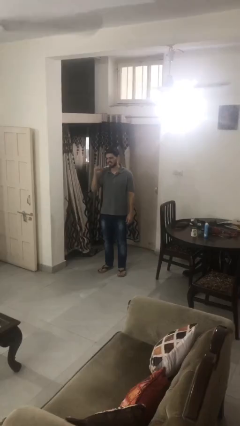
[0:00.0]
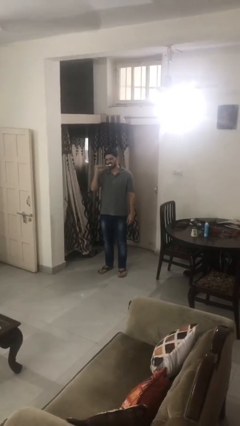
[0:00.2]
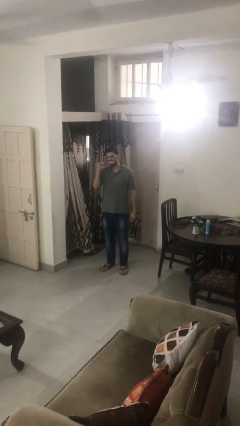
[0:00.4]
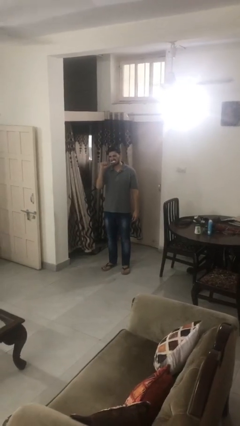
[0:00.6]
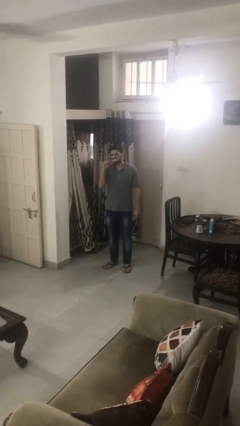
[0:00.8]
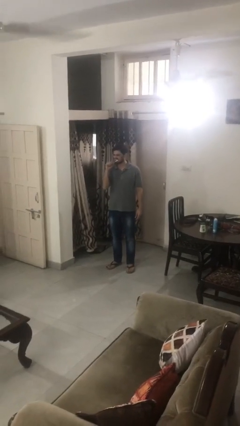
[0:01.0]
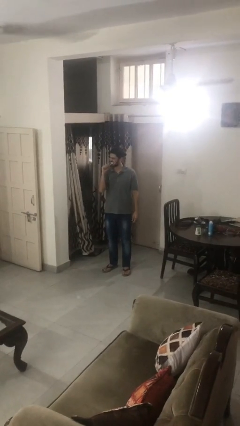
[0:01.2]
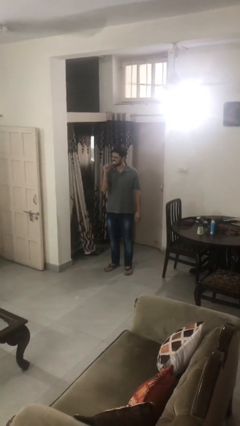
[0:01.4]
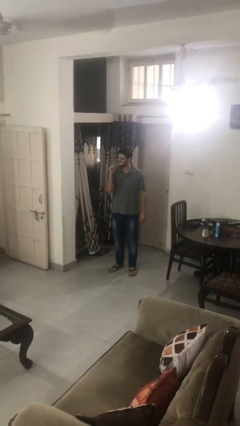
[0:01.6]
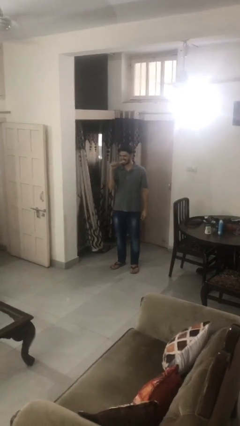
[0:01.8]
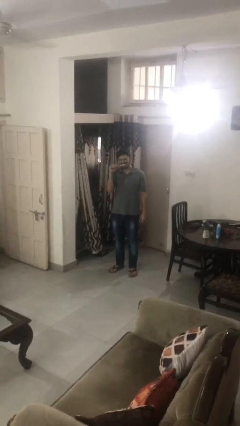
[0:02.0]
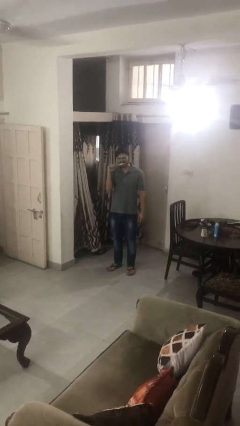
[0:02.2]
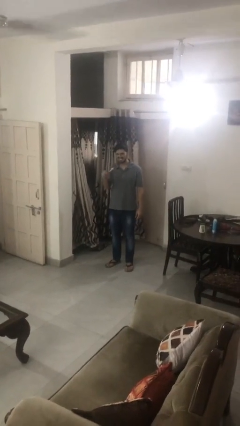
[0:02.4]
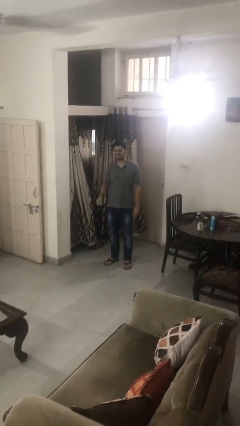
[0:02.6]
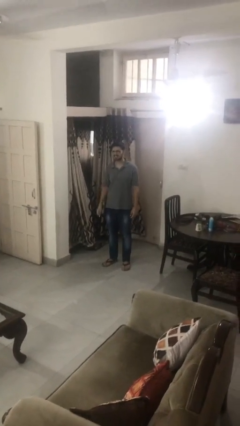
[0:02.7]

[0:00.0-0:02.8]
person brushes teeth

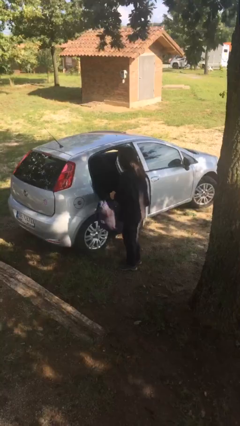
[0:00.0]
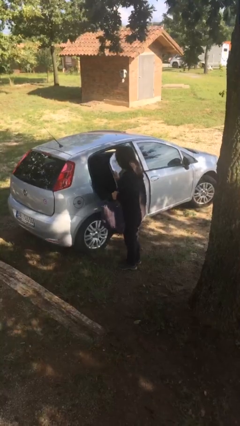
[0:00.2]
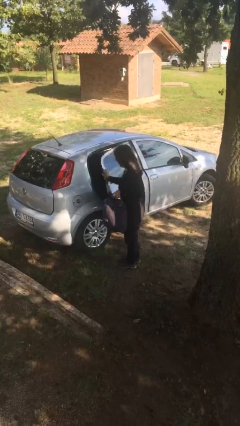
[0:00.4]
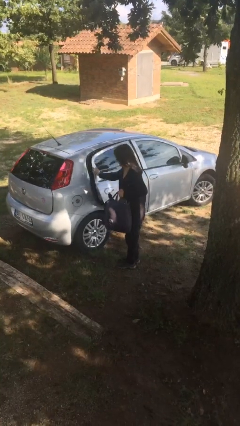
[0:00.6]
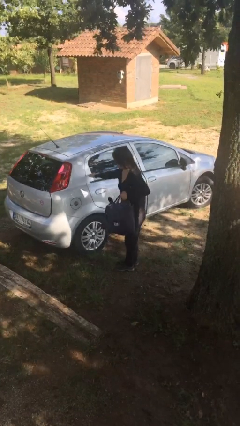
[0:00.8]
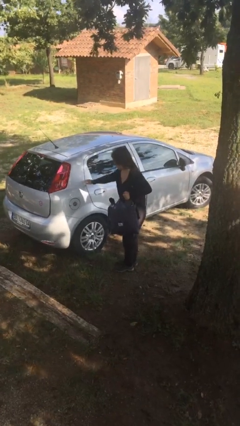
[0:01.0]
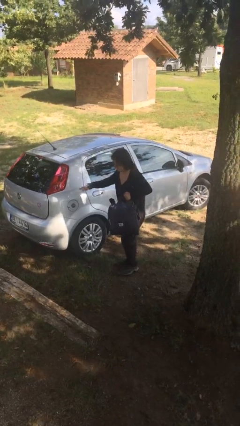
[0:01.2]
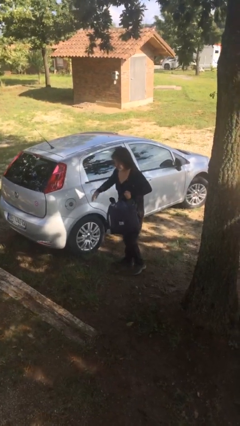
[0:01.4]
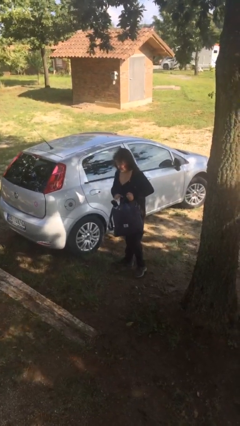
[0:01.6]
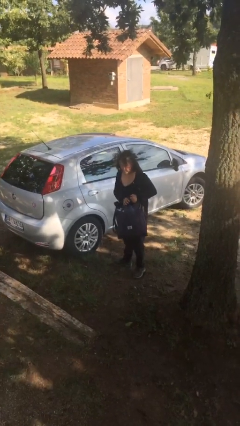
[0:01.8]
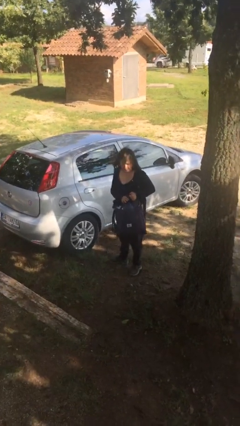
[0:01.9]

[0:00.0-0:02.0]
person closes car door

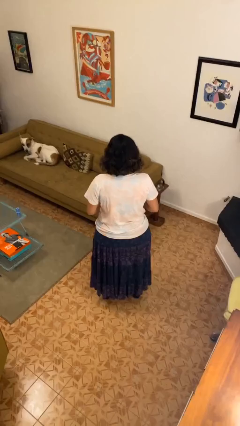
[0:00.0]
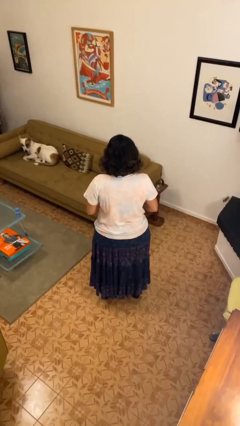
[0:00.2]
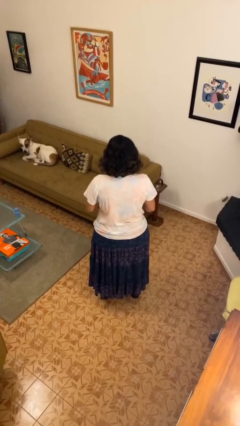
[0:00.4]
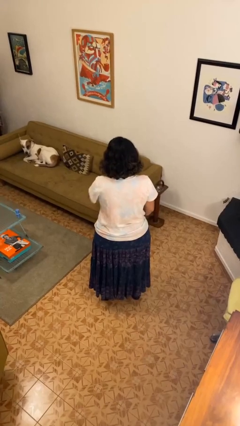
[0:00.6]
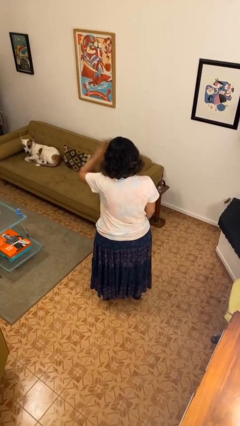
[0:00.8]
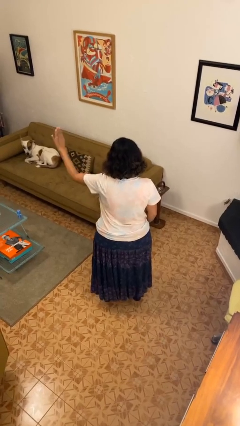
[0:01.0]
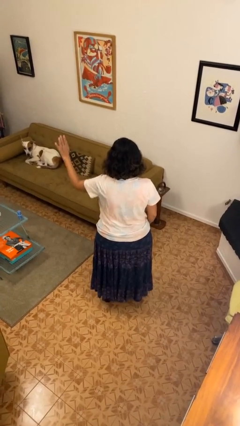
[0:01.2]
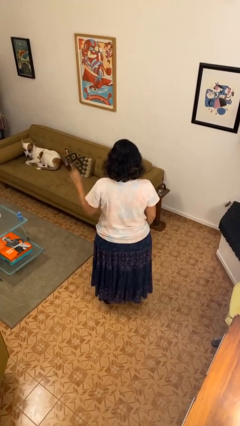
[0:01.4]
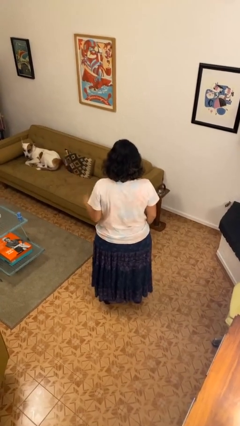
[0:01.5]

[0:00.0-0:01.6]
person gestures swipe left

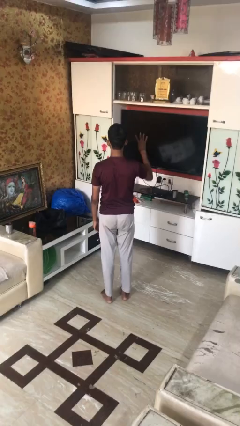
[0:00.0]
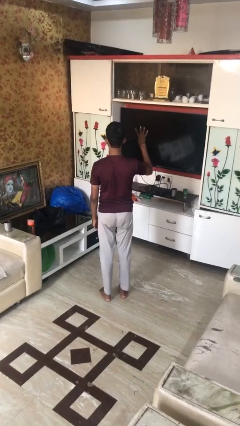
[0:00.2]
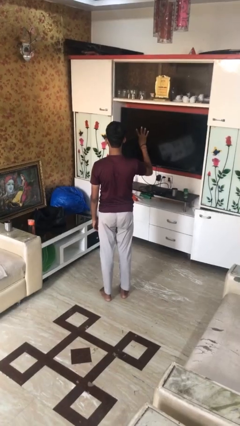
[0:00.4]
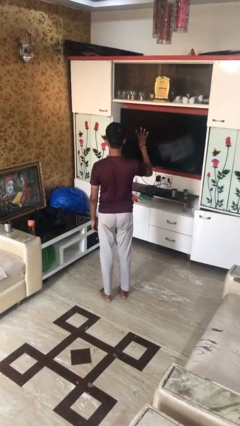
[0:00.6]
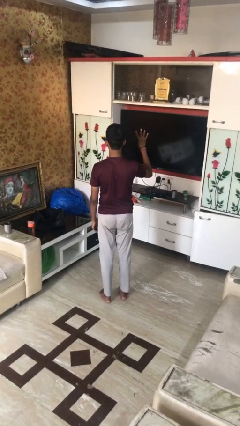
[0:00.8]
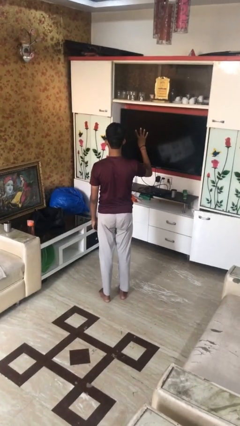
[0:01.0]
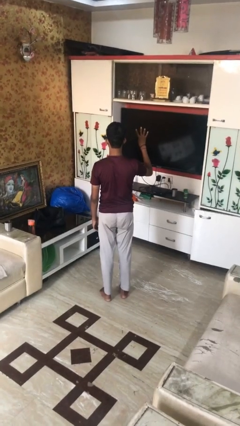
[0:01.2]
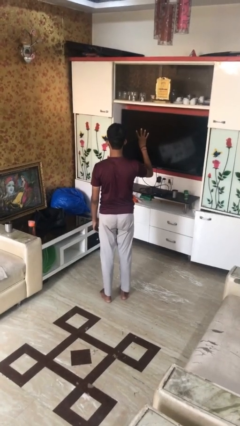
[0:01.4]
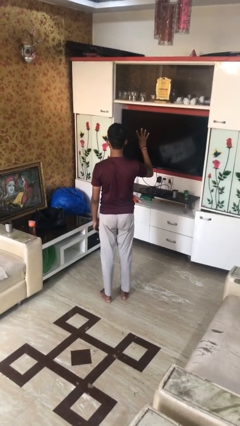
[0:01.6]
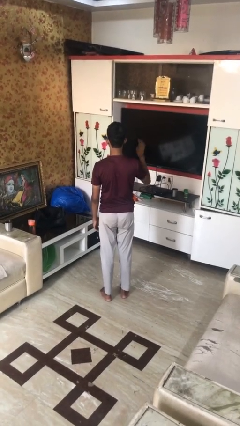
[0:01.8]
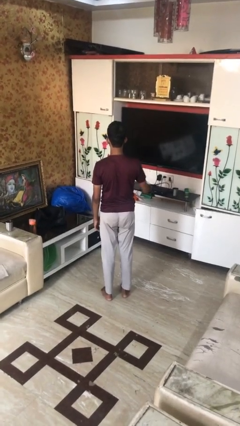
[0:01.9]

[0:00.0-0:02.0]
person gestures number four

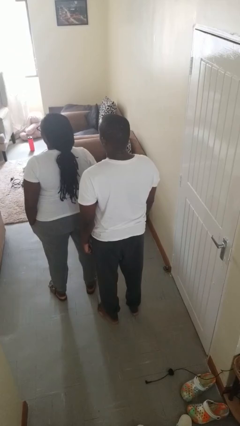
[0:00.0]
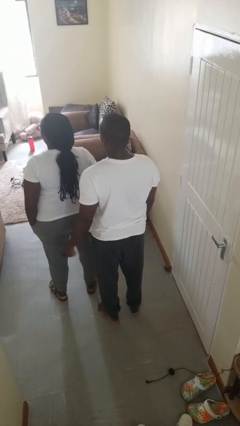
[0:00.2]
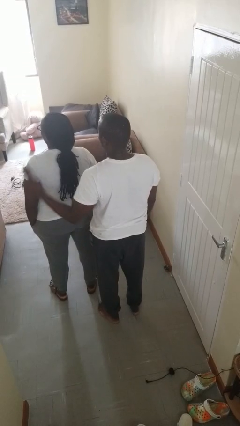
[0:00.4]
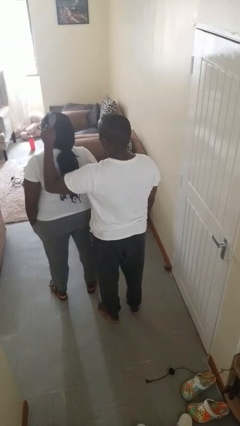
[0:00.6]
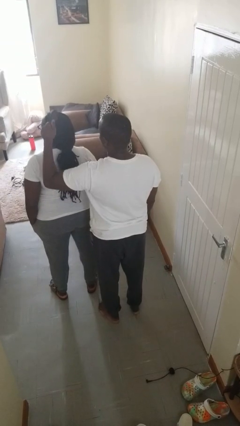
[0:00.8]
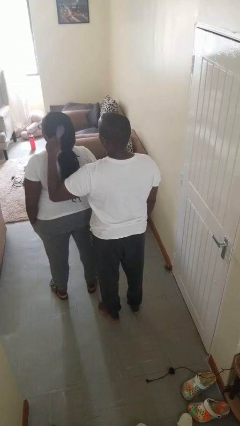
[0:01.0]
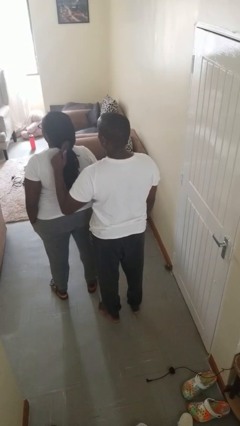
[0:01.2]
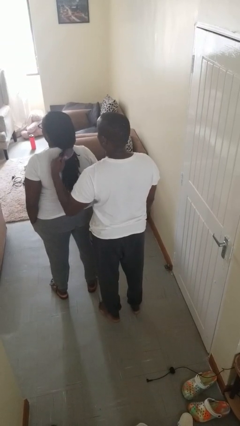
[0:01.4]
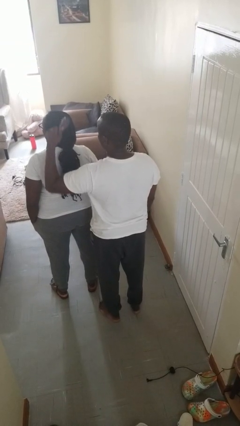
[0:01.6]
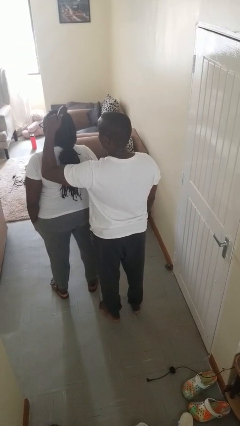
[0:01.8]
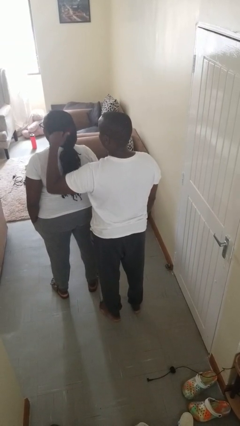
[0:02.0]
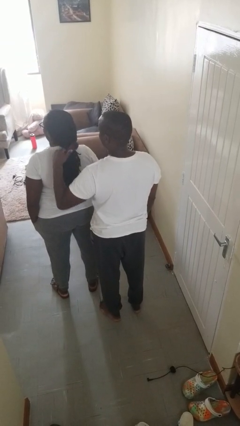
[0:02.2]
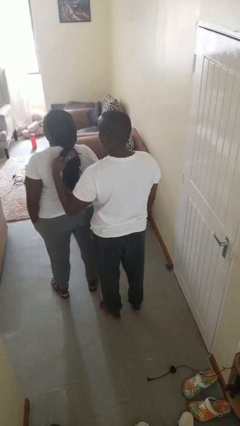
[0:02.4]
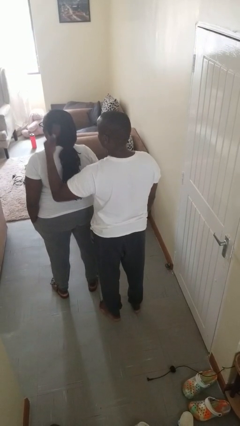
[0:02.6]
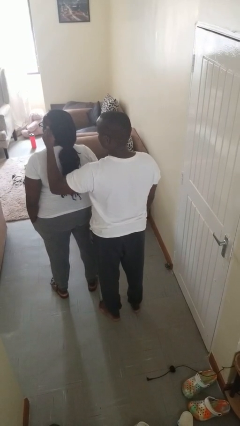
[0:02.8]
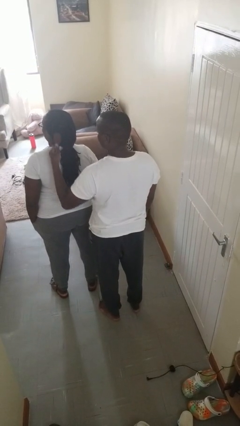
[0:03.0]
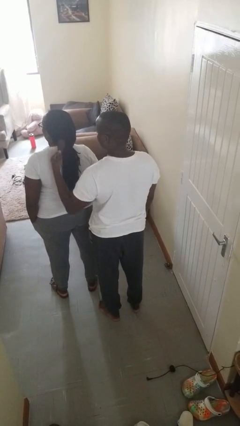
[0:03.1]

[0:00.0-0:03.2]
person brushes hair of person

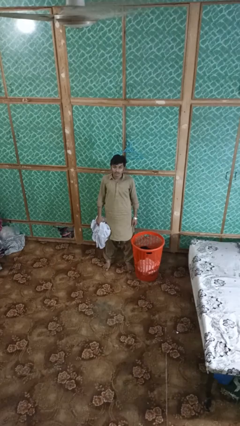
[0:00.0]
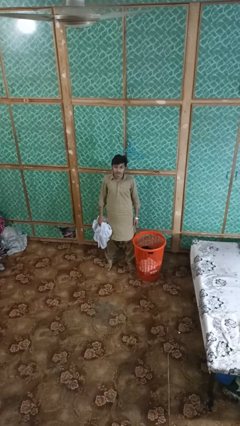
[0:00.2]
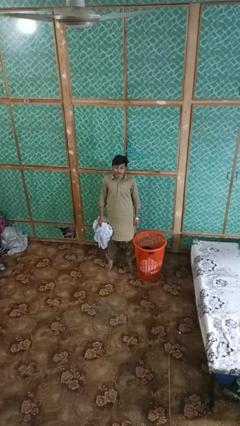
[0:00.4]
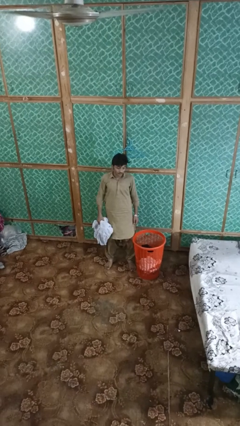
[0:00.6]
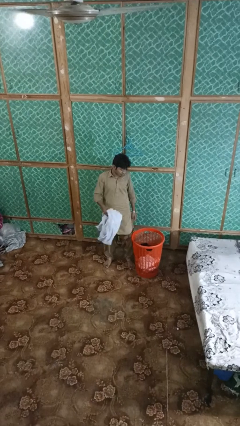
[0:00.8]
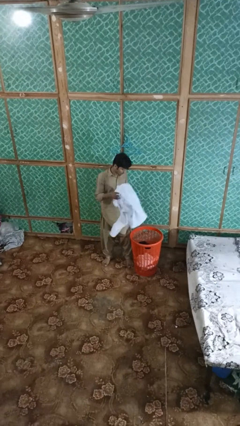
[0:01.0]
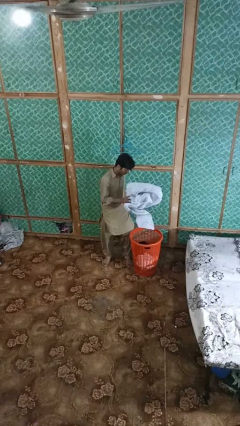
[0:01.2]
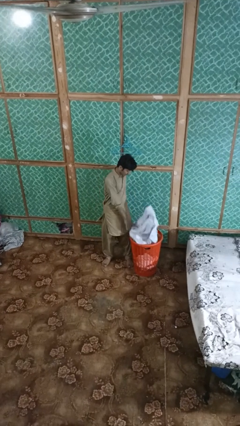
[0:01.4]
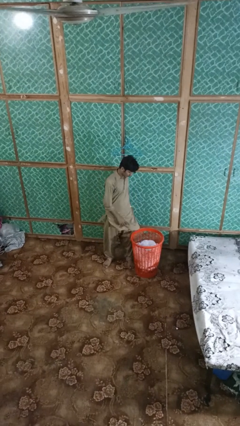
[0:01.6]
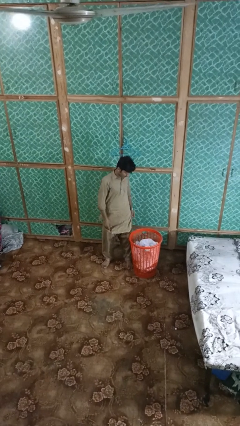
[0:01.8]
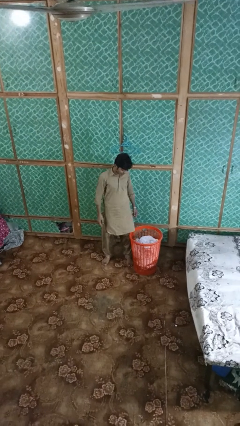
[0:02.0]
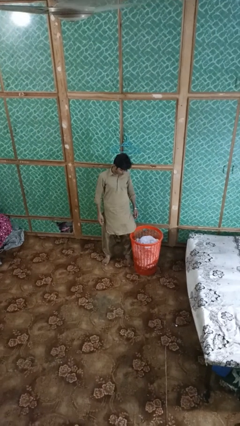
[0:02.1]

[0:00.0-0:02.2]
person puts object into basket

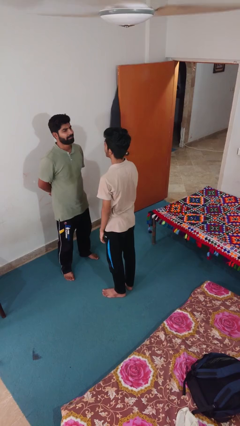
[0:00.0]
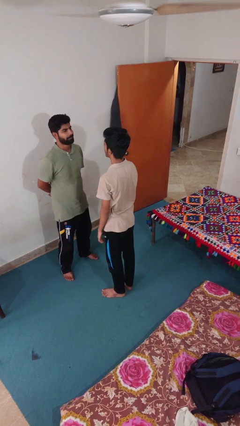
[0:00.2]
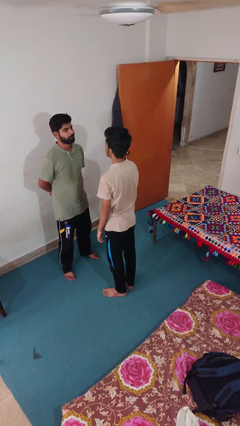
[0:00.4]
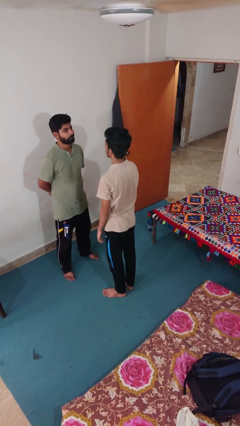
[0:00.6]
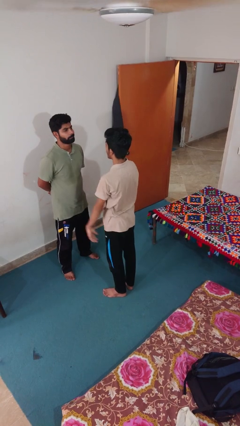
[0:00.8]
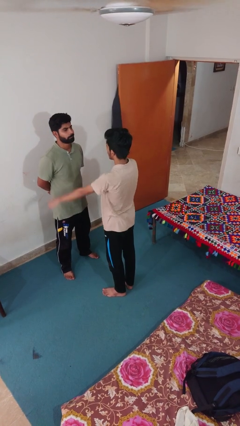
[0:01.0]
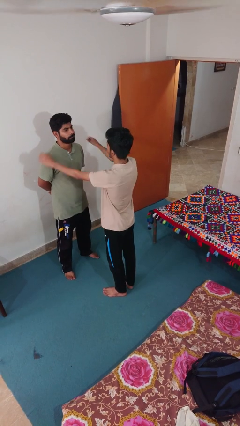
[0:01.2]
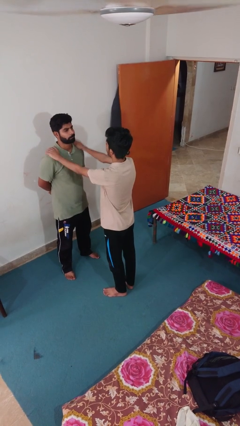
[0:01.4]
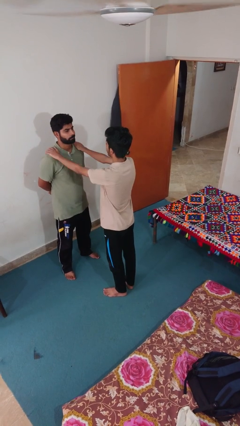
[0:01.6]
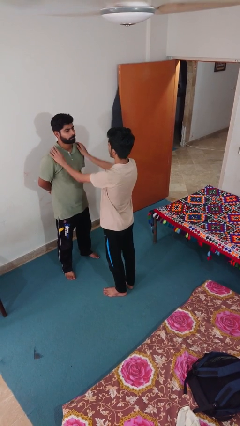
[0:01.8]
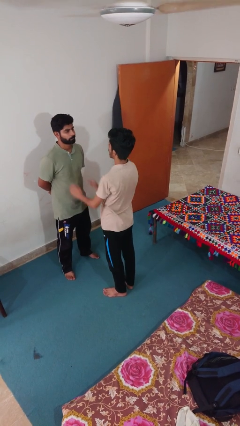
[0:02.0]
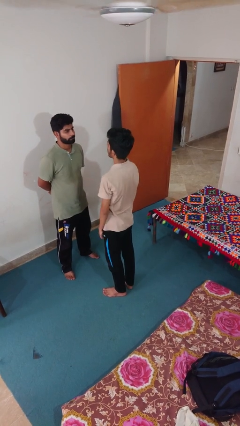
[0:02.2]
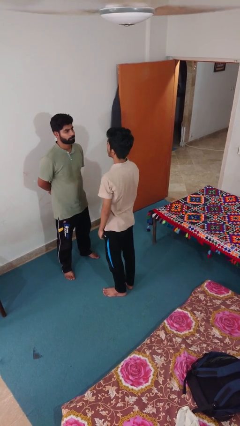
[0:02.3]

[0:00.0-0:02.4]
person pounds shoulders of person

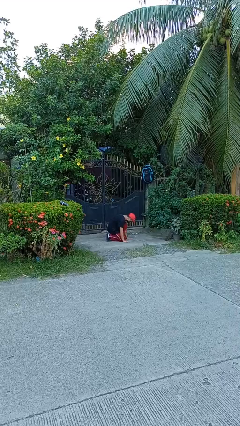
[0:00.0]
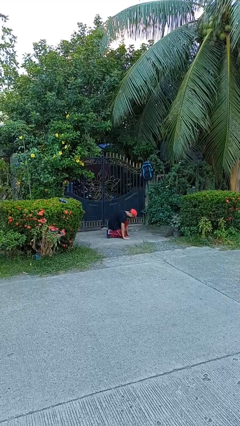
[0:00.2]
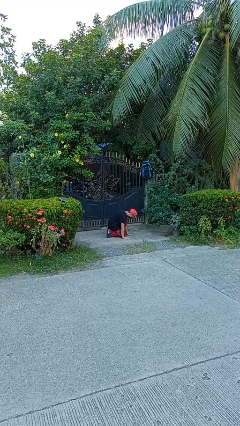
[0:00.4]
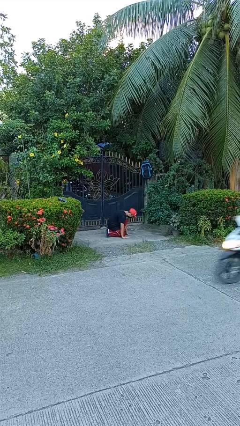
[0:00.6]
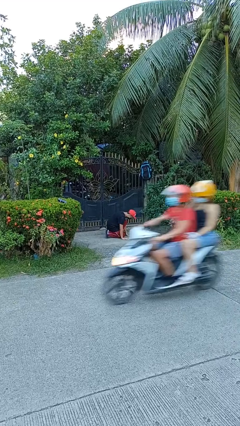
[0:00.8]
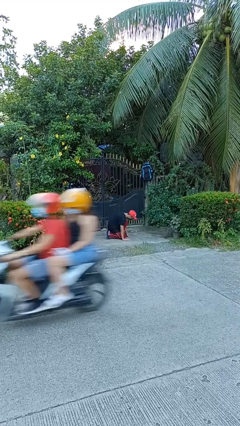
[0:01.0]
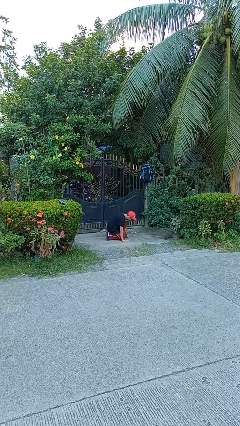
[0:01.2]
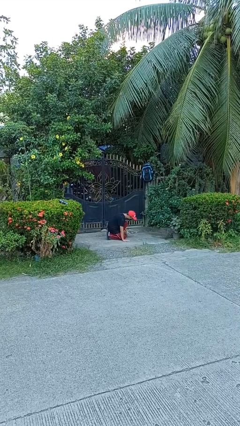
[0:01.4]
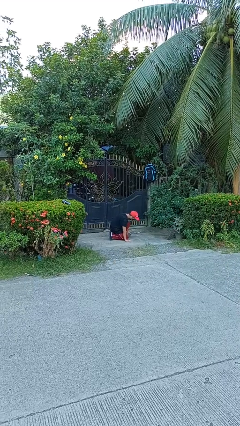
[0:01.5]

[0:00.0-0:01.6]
person stands up from floor
